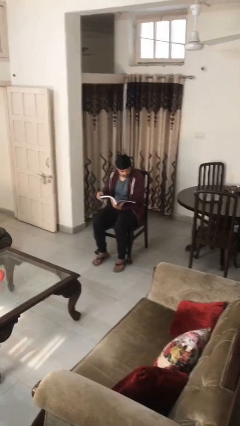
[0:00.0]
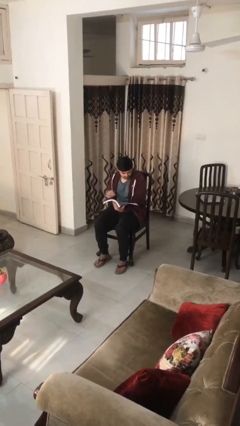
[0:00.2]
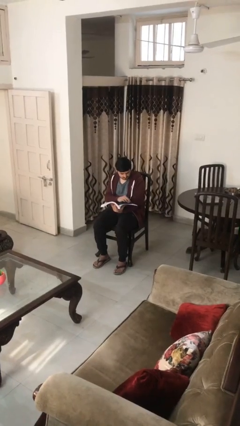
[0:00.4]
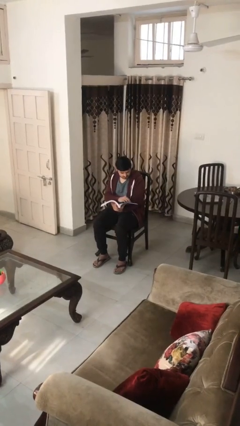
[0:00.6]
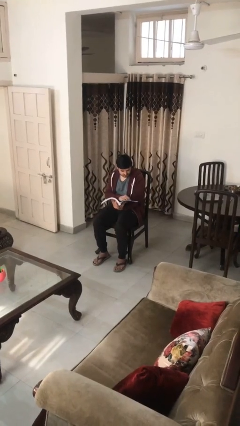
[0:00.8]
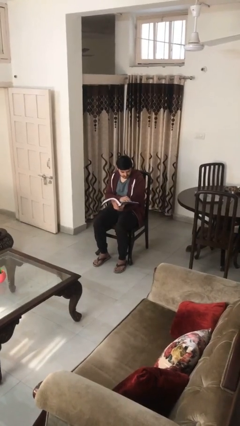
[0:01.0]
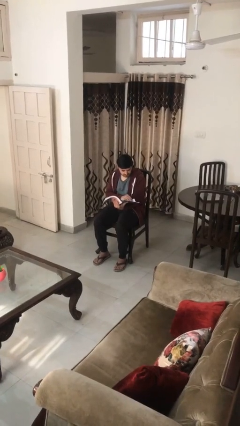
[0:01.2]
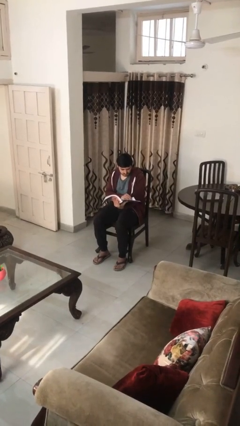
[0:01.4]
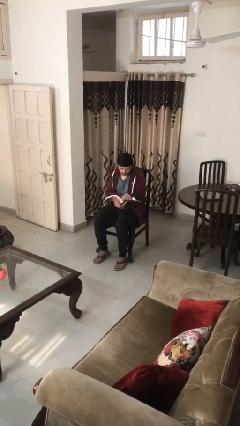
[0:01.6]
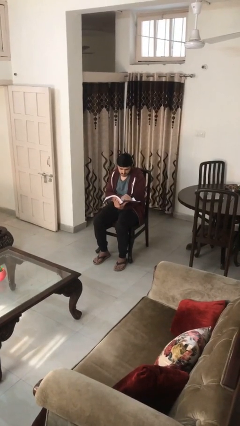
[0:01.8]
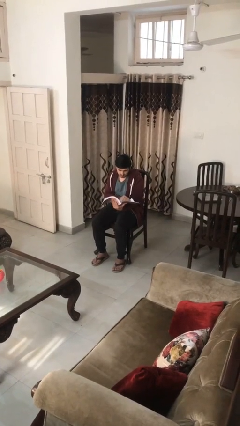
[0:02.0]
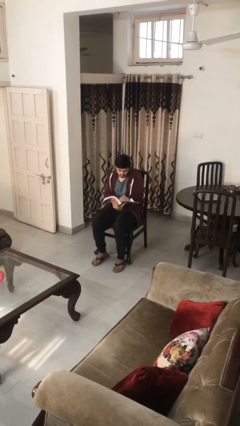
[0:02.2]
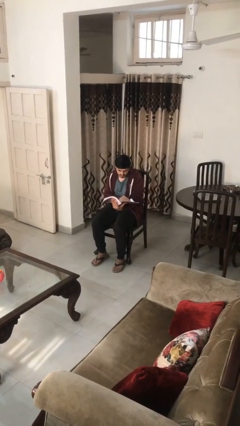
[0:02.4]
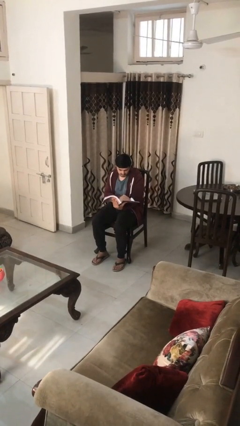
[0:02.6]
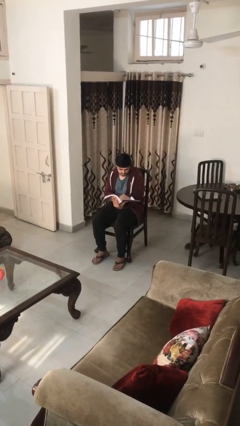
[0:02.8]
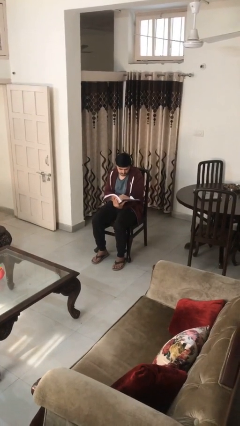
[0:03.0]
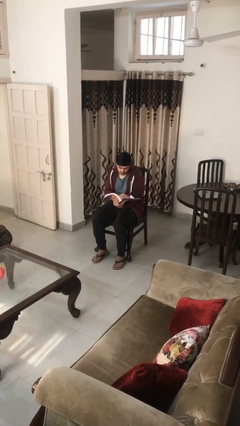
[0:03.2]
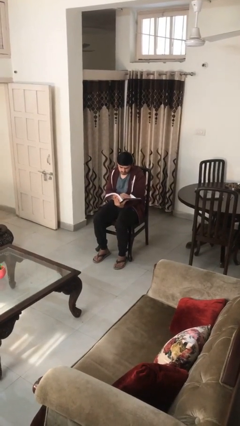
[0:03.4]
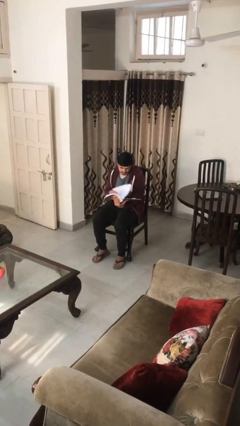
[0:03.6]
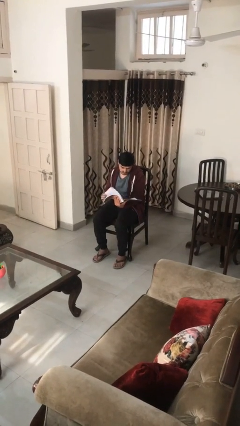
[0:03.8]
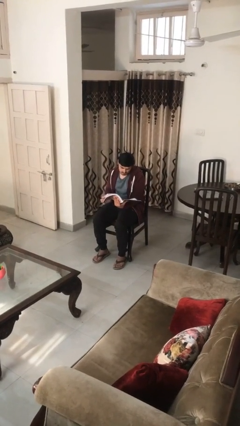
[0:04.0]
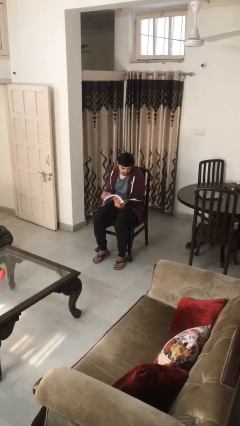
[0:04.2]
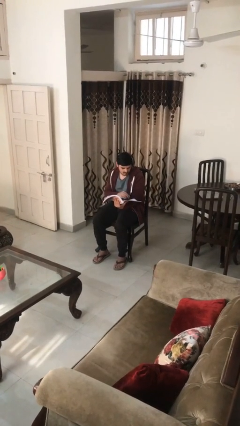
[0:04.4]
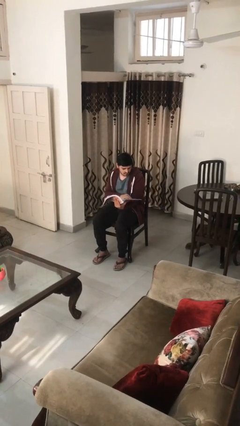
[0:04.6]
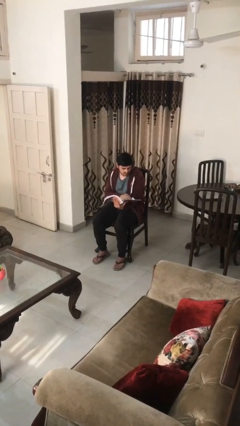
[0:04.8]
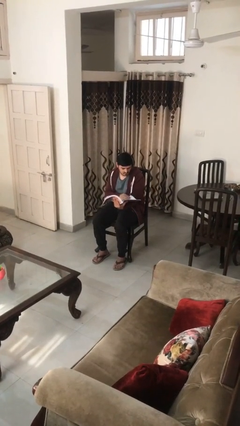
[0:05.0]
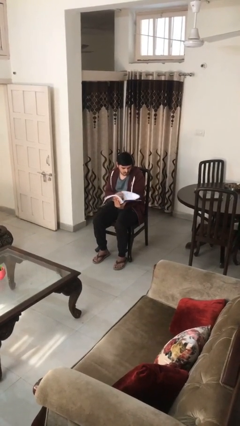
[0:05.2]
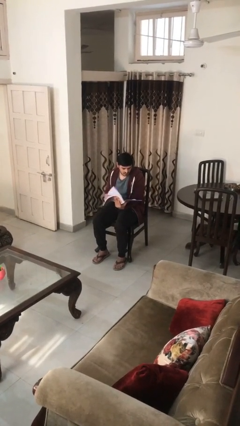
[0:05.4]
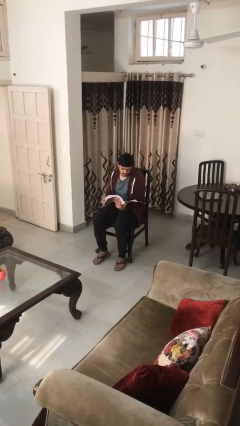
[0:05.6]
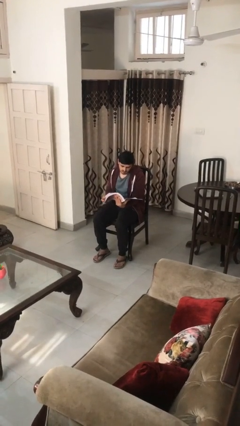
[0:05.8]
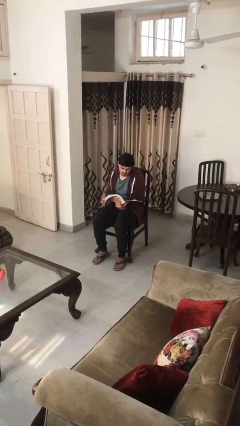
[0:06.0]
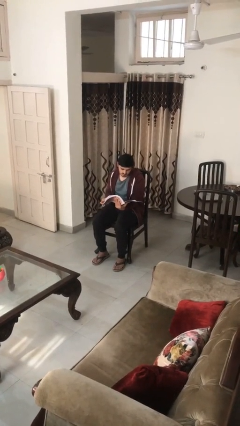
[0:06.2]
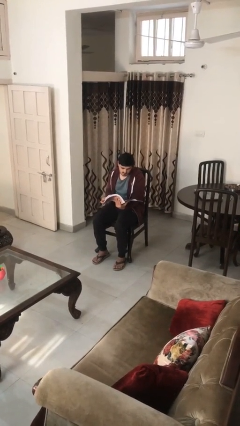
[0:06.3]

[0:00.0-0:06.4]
person reads document

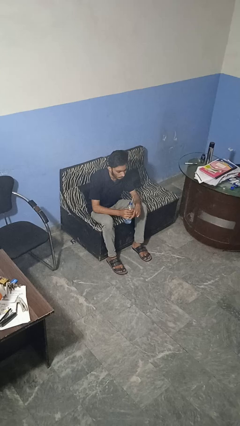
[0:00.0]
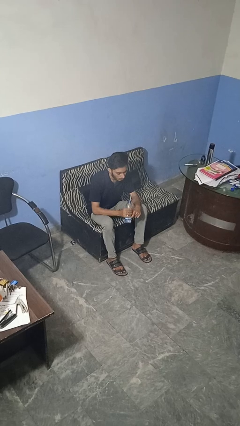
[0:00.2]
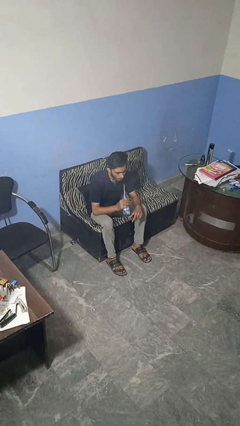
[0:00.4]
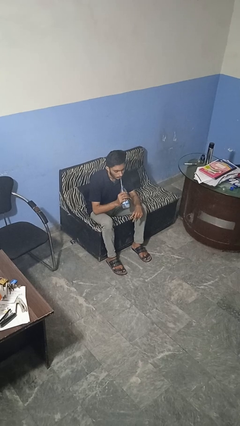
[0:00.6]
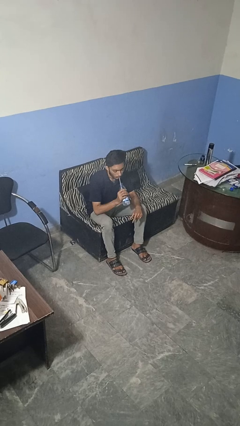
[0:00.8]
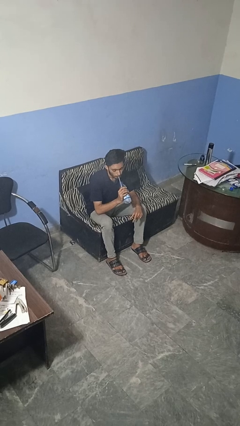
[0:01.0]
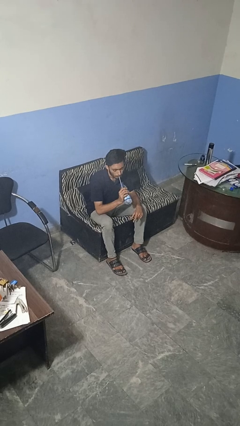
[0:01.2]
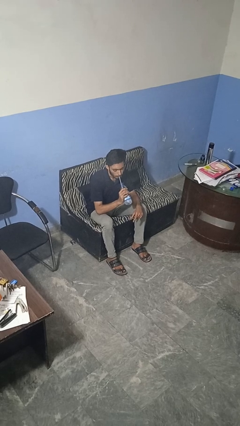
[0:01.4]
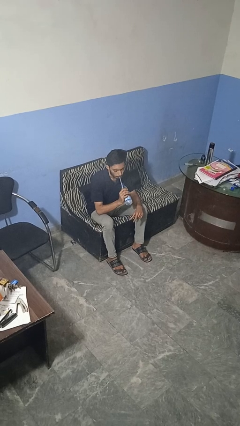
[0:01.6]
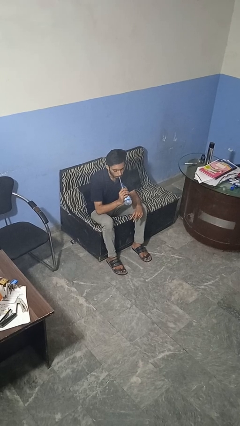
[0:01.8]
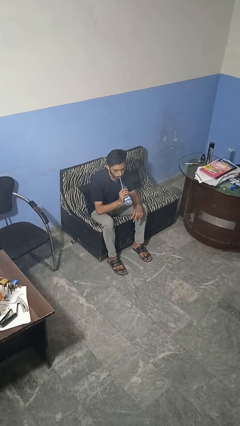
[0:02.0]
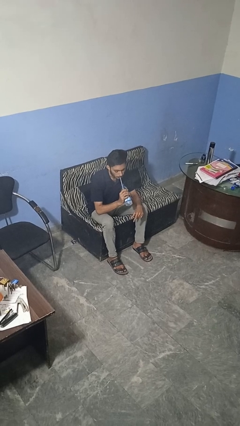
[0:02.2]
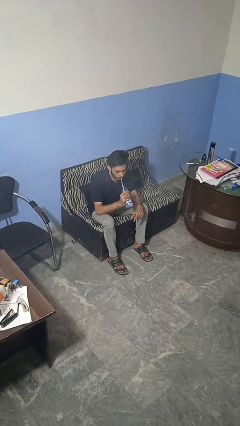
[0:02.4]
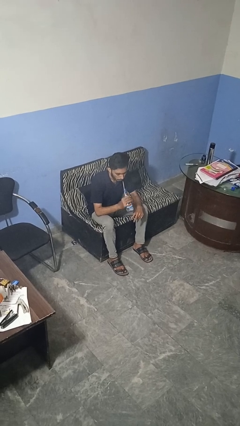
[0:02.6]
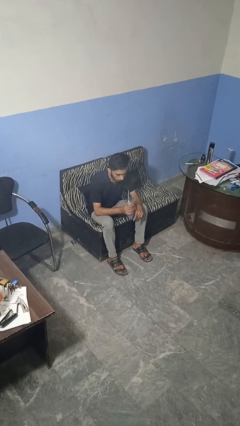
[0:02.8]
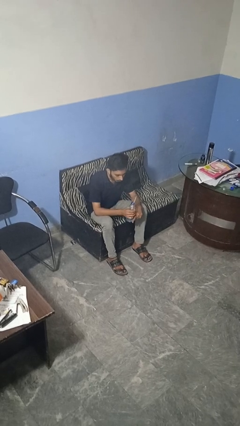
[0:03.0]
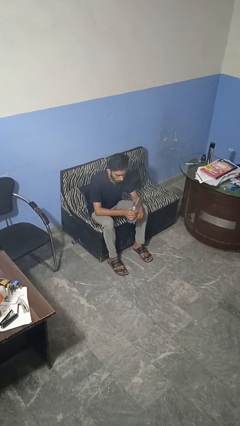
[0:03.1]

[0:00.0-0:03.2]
person drinks from straw

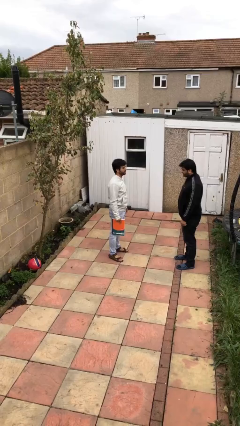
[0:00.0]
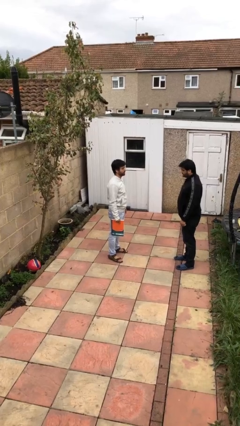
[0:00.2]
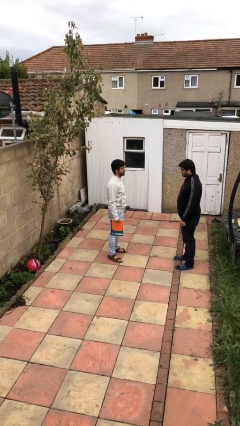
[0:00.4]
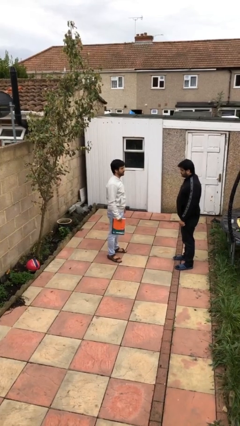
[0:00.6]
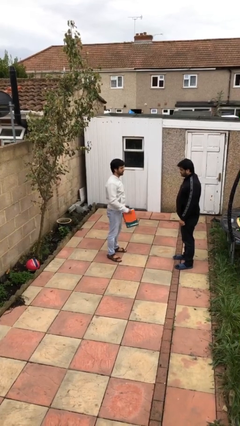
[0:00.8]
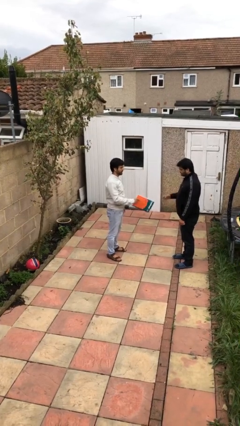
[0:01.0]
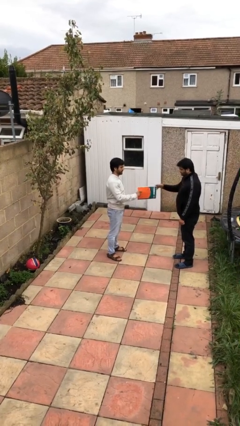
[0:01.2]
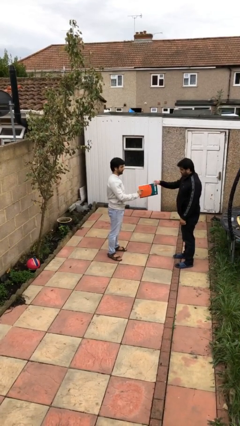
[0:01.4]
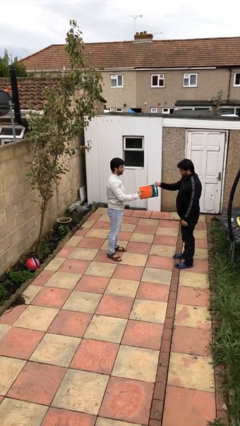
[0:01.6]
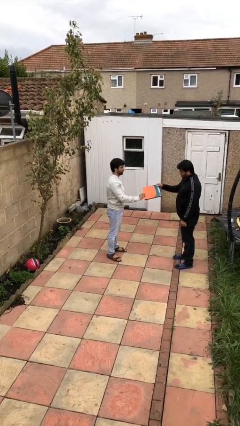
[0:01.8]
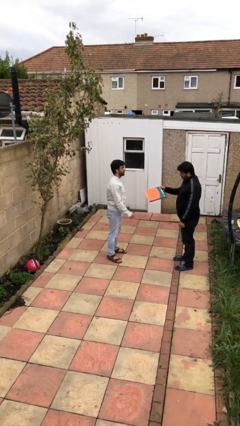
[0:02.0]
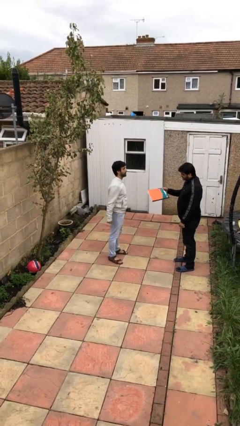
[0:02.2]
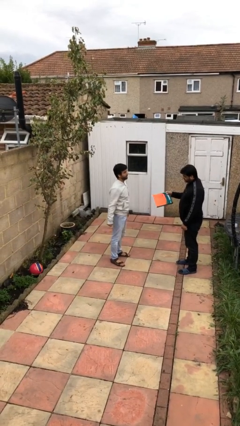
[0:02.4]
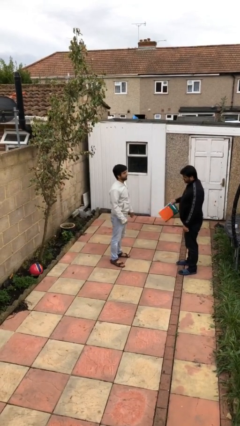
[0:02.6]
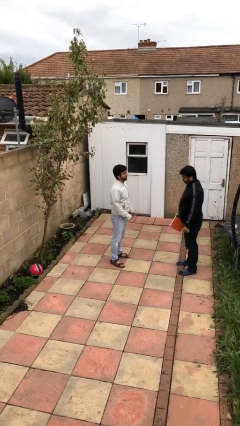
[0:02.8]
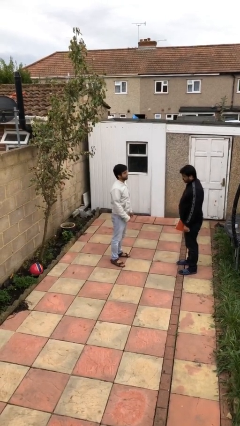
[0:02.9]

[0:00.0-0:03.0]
person transfers object to person

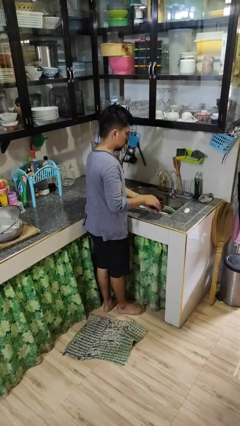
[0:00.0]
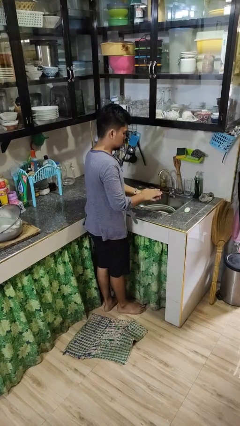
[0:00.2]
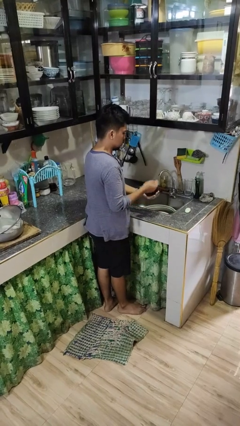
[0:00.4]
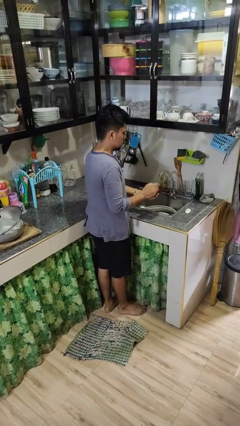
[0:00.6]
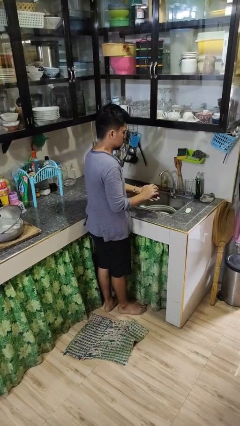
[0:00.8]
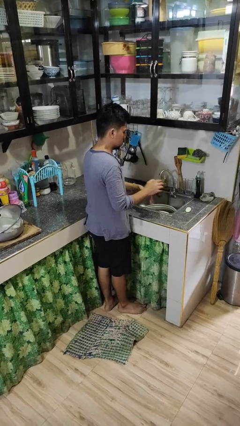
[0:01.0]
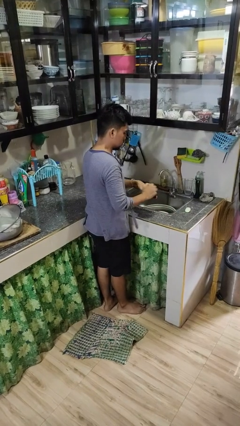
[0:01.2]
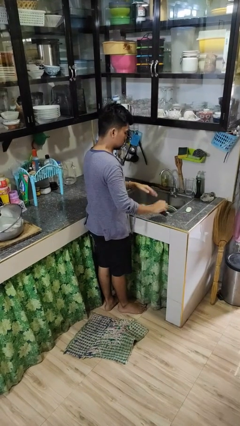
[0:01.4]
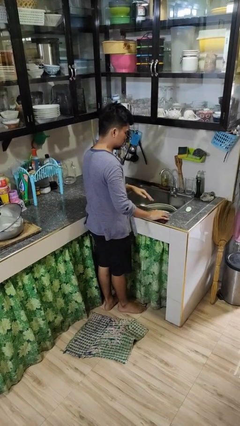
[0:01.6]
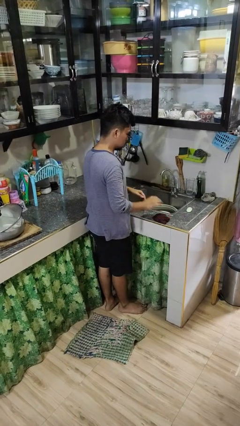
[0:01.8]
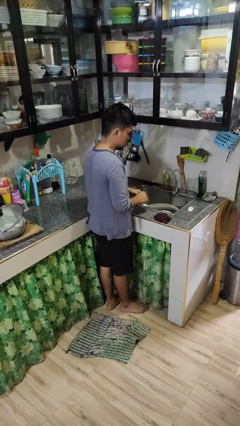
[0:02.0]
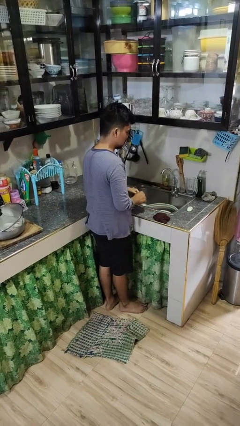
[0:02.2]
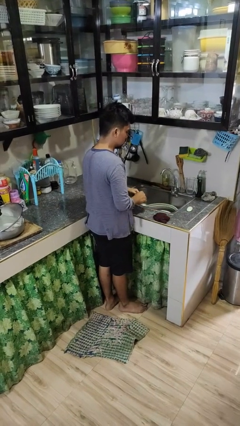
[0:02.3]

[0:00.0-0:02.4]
person dries hands with towel

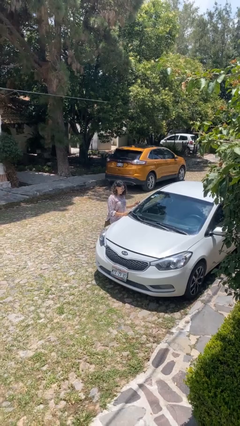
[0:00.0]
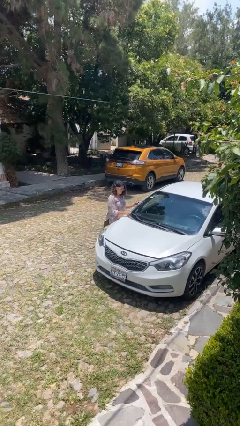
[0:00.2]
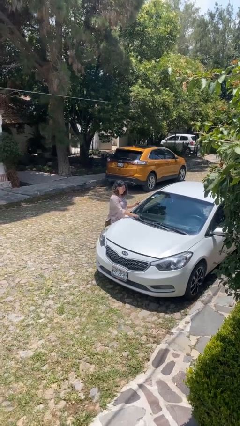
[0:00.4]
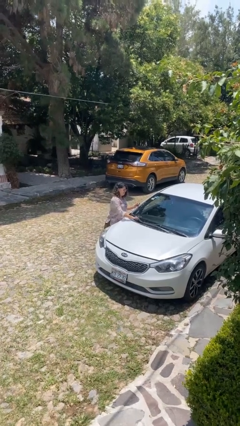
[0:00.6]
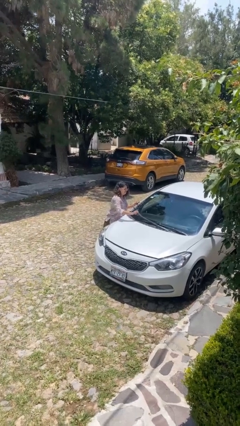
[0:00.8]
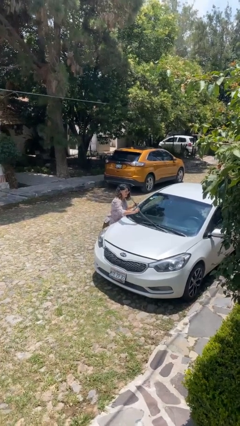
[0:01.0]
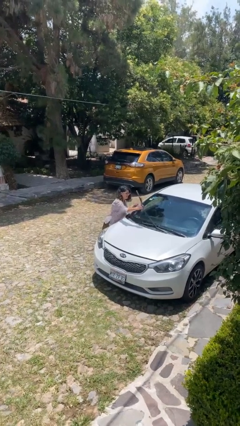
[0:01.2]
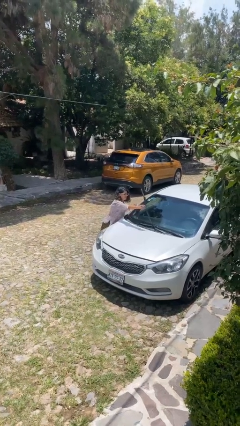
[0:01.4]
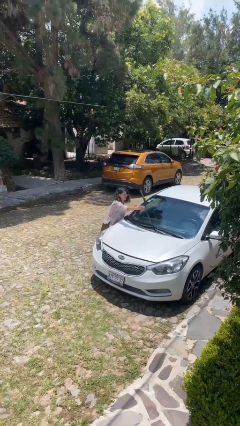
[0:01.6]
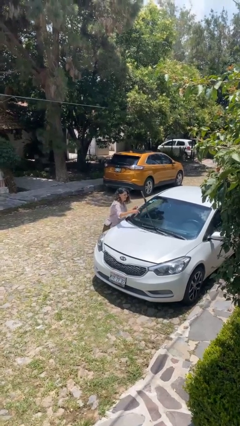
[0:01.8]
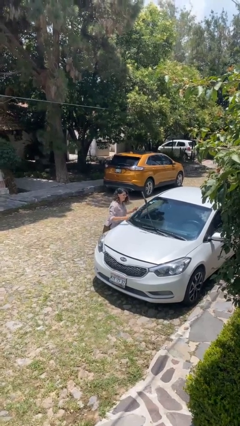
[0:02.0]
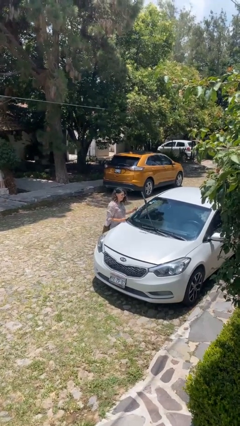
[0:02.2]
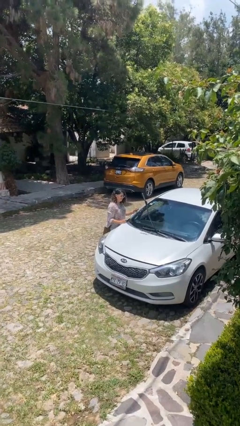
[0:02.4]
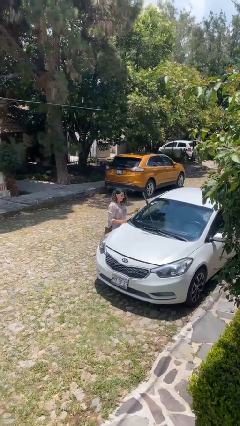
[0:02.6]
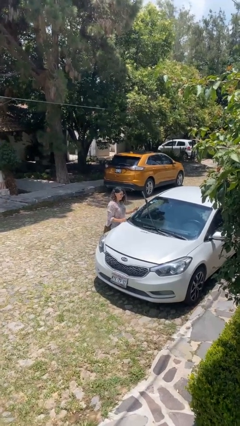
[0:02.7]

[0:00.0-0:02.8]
person flips up car wipers
